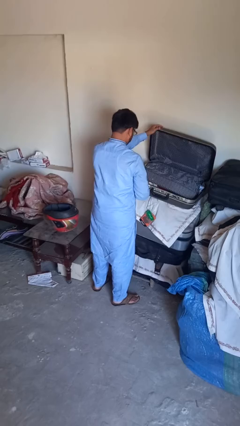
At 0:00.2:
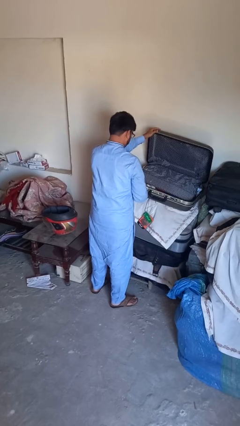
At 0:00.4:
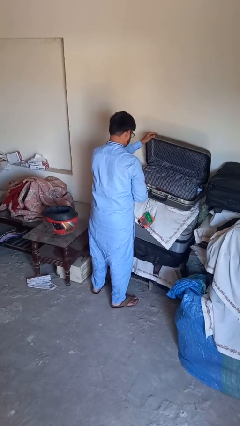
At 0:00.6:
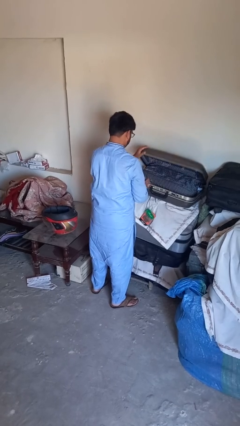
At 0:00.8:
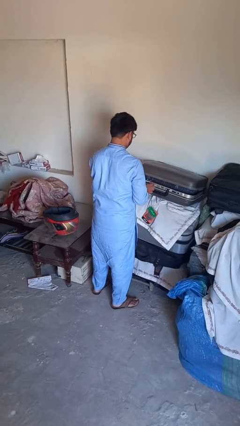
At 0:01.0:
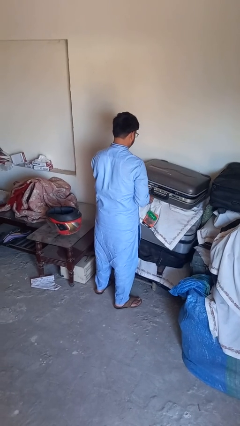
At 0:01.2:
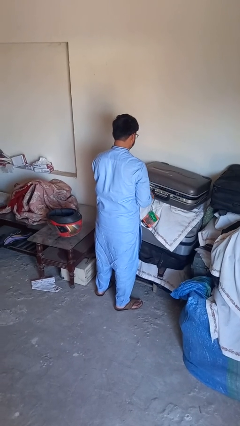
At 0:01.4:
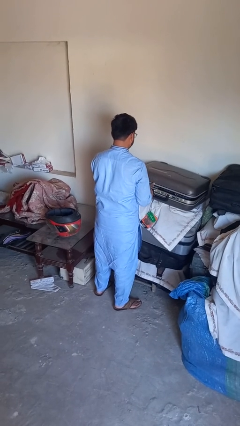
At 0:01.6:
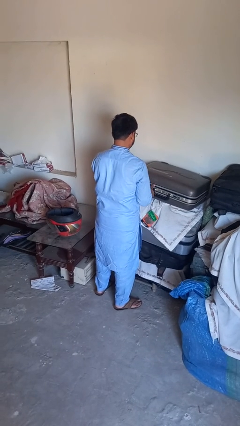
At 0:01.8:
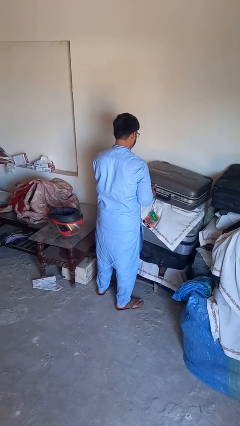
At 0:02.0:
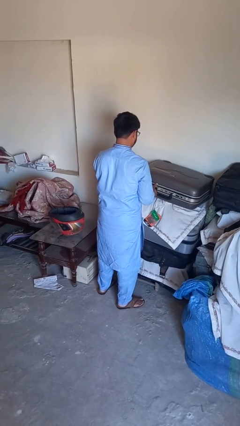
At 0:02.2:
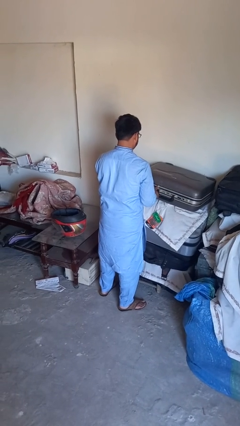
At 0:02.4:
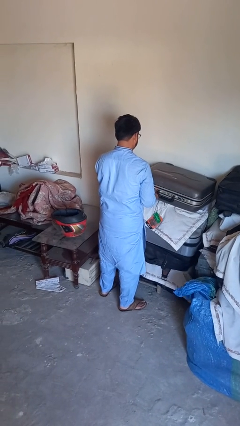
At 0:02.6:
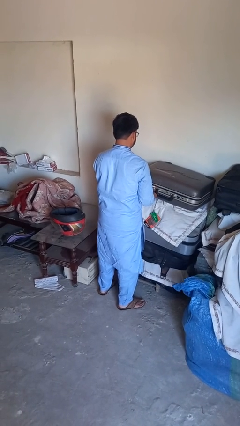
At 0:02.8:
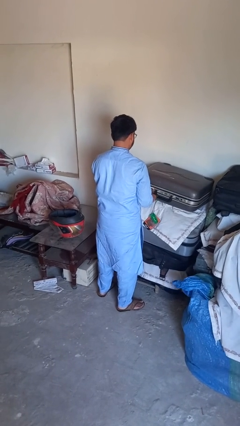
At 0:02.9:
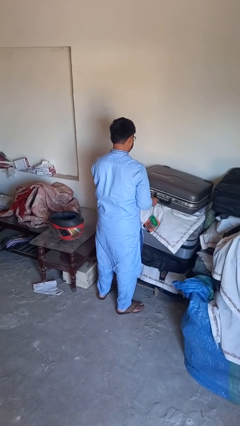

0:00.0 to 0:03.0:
person closes suitcase

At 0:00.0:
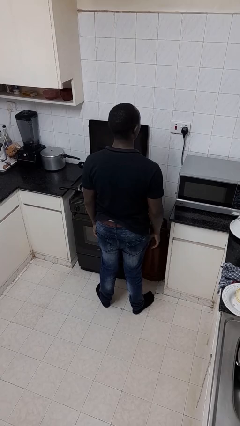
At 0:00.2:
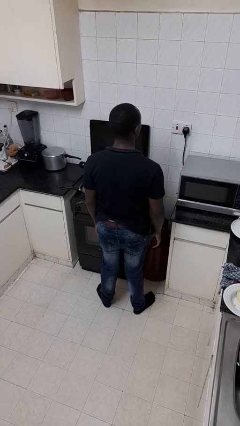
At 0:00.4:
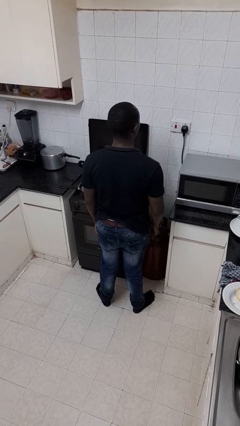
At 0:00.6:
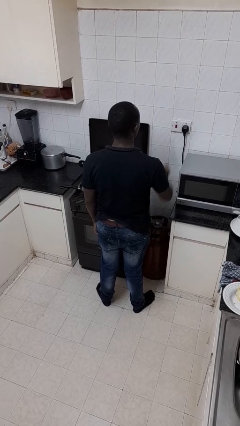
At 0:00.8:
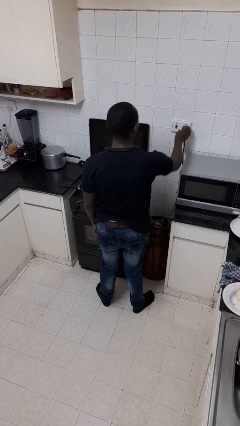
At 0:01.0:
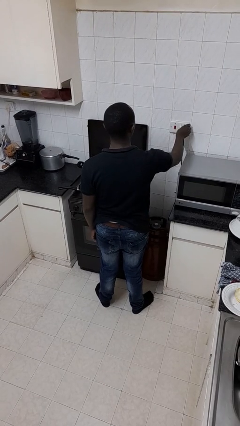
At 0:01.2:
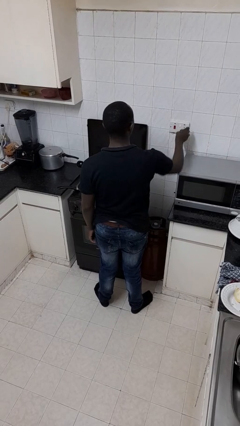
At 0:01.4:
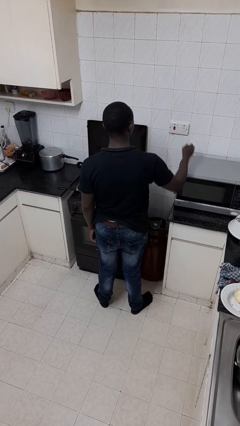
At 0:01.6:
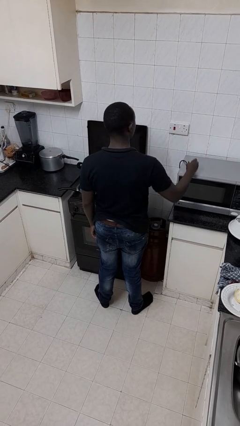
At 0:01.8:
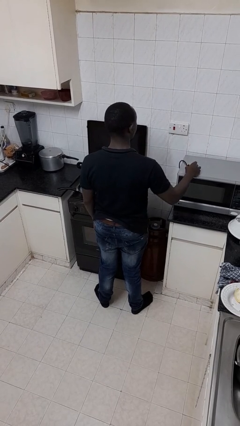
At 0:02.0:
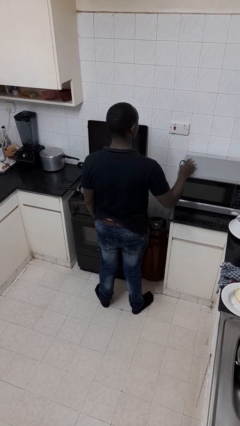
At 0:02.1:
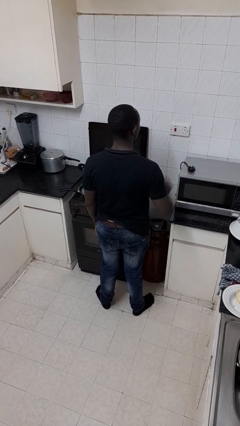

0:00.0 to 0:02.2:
person unplugs from electrical socket

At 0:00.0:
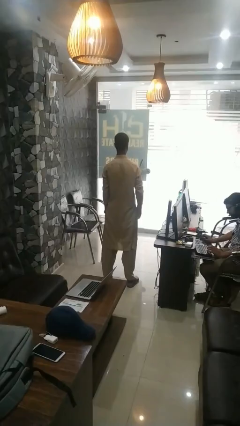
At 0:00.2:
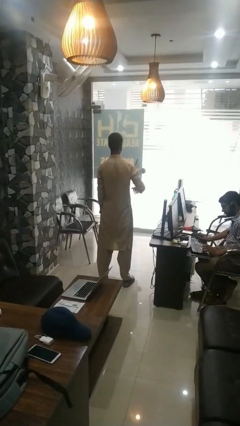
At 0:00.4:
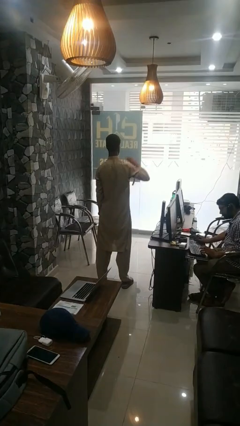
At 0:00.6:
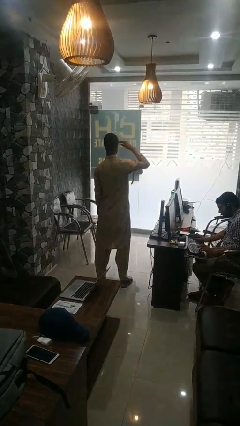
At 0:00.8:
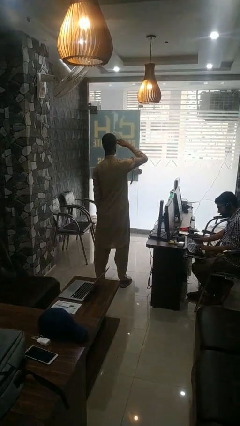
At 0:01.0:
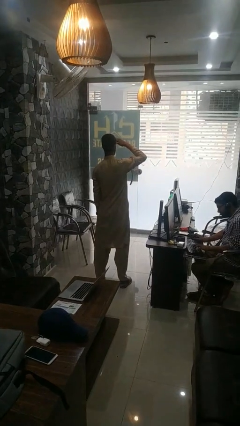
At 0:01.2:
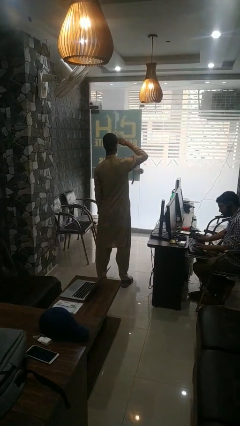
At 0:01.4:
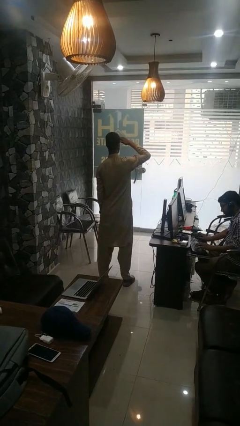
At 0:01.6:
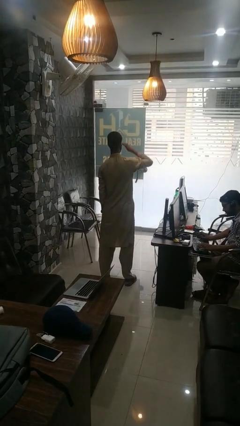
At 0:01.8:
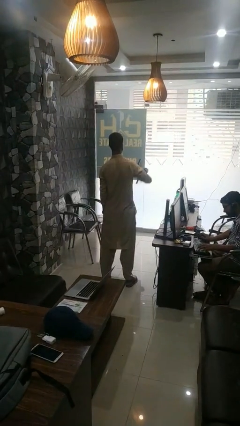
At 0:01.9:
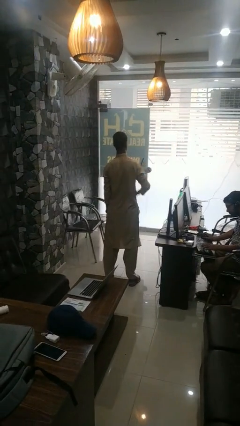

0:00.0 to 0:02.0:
person shades eyes

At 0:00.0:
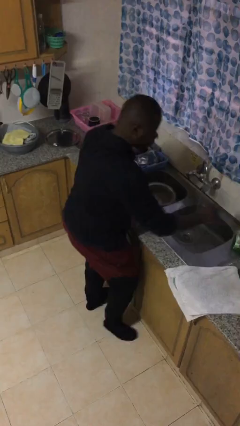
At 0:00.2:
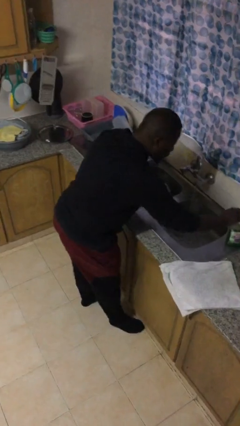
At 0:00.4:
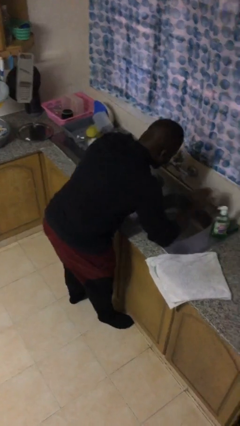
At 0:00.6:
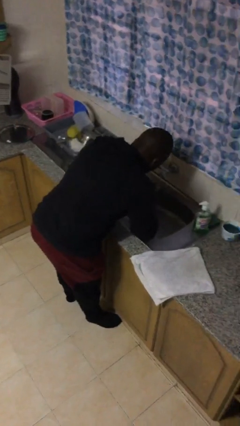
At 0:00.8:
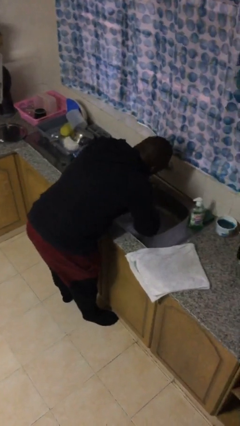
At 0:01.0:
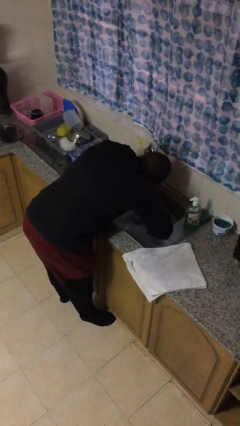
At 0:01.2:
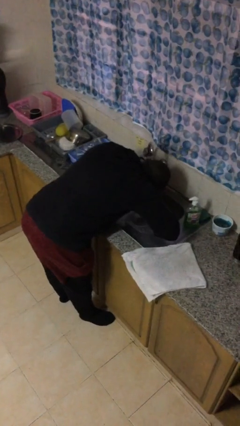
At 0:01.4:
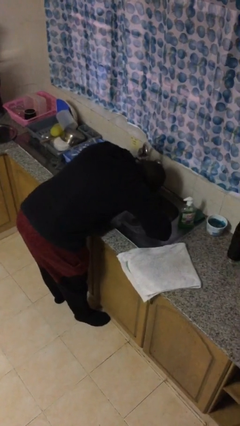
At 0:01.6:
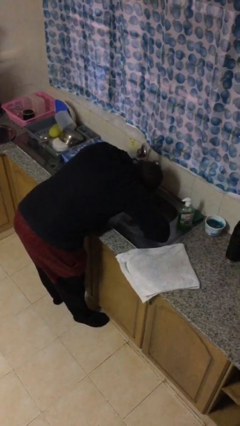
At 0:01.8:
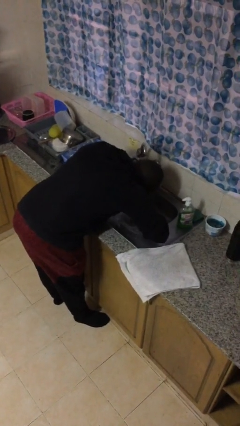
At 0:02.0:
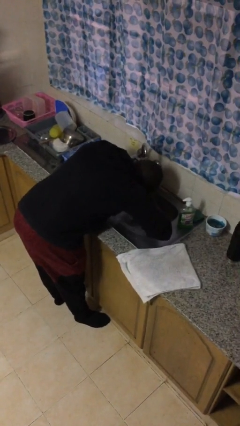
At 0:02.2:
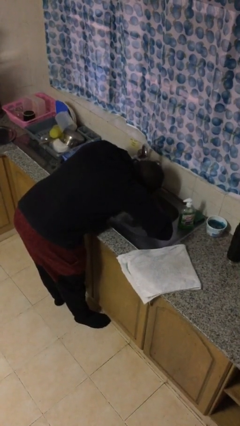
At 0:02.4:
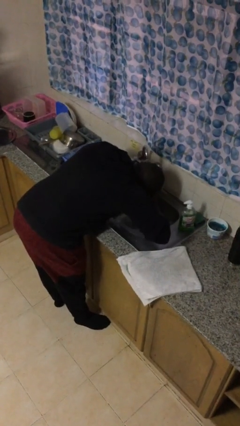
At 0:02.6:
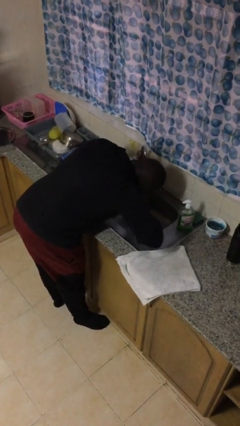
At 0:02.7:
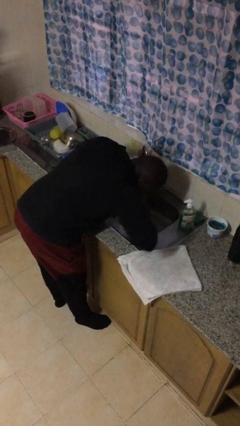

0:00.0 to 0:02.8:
person washes face

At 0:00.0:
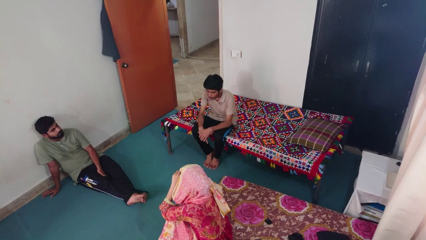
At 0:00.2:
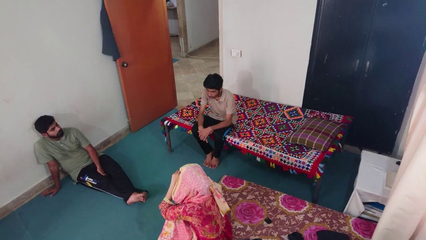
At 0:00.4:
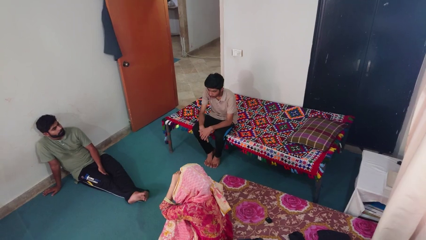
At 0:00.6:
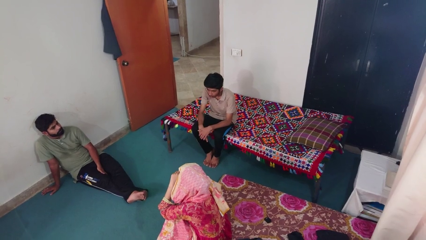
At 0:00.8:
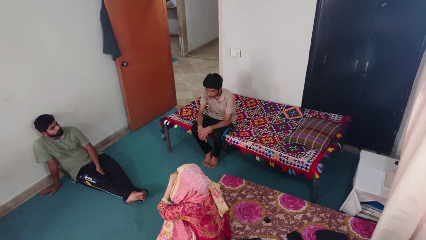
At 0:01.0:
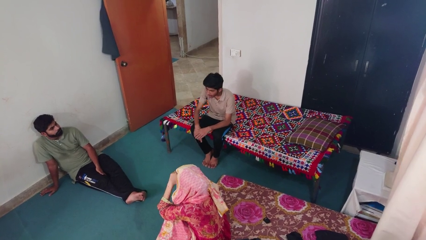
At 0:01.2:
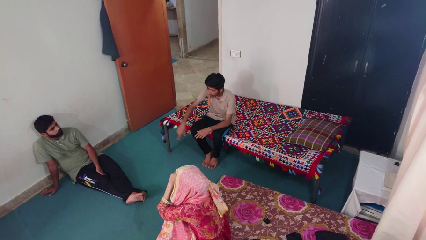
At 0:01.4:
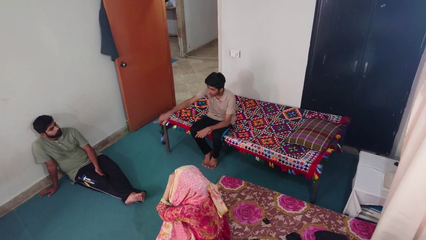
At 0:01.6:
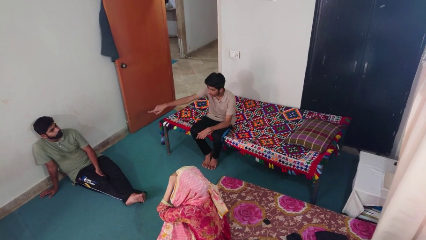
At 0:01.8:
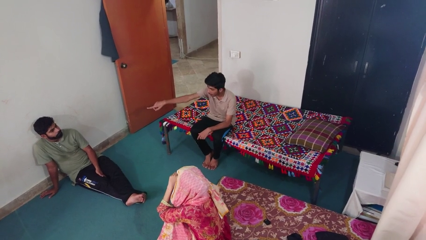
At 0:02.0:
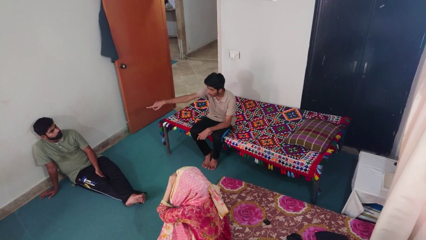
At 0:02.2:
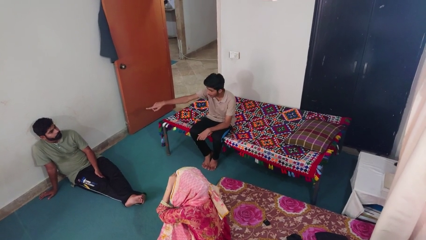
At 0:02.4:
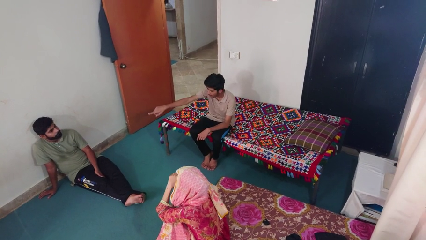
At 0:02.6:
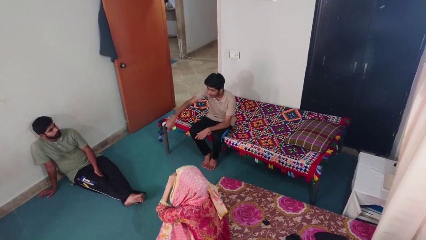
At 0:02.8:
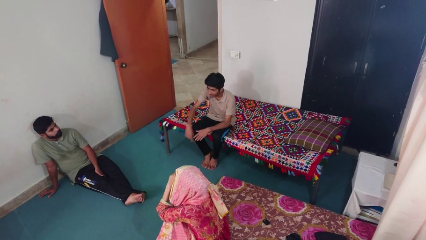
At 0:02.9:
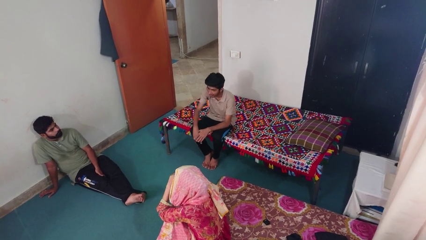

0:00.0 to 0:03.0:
person points at person

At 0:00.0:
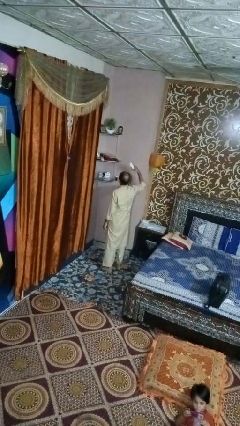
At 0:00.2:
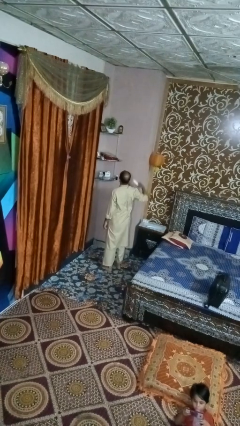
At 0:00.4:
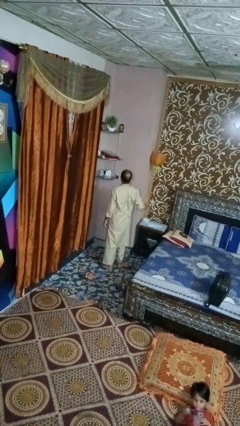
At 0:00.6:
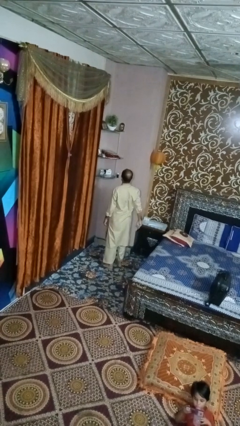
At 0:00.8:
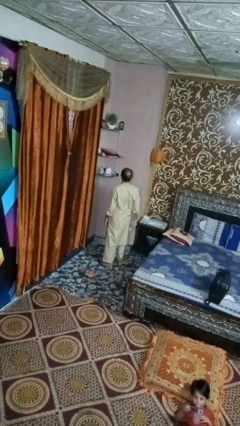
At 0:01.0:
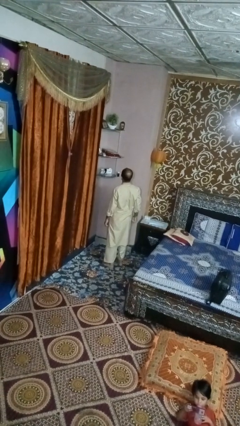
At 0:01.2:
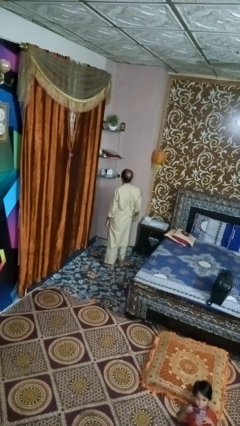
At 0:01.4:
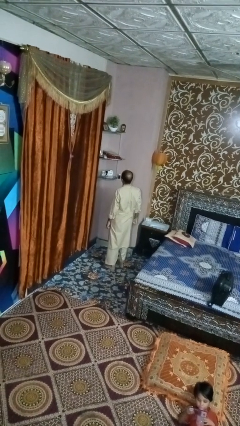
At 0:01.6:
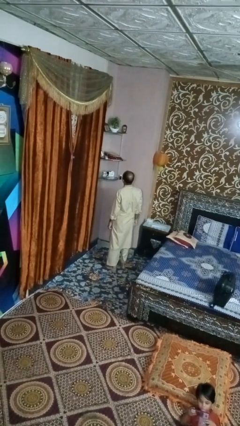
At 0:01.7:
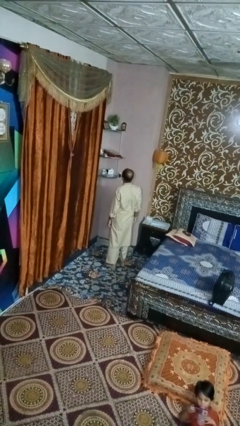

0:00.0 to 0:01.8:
person puts down object on shelf

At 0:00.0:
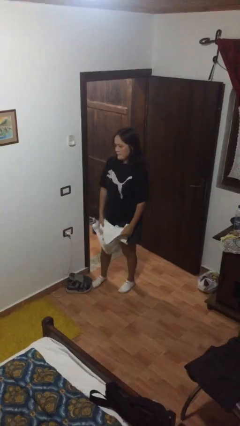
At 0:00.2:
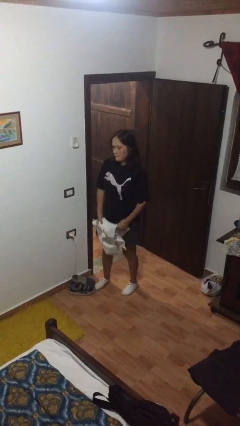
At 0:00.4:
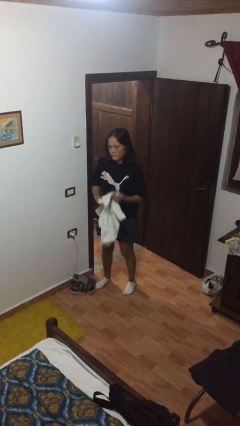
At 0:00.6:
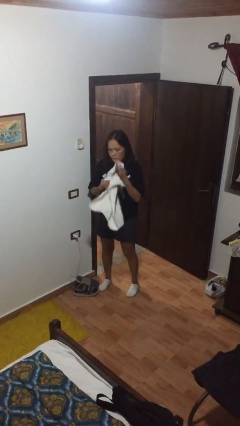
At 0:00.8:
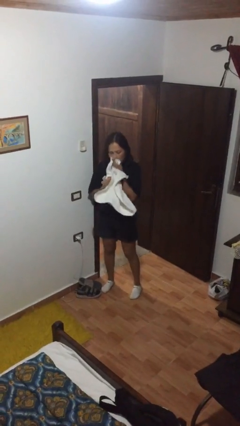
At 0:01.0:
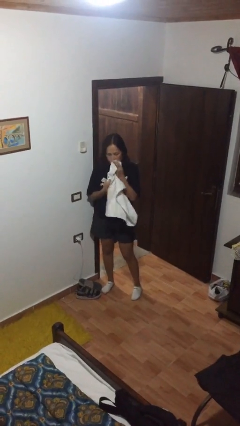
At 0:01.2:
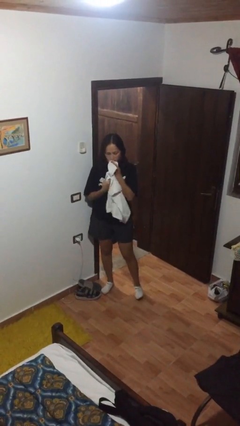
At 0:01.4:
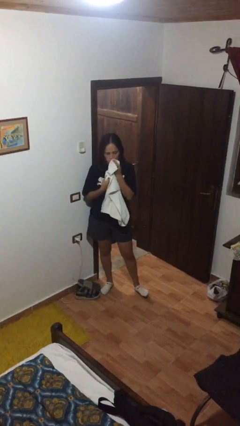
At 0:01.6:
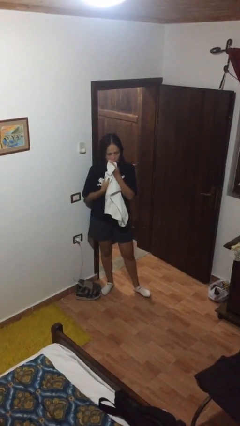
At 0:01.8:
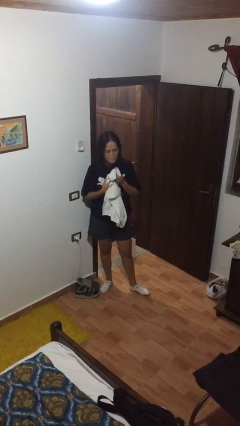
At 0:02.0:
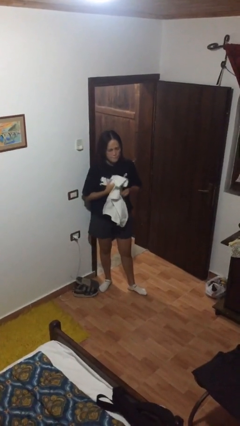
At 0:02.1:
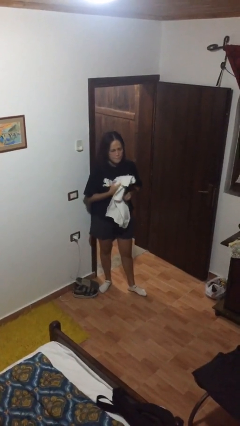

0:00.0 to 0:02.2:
person wipes mouth with napkin
